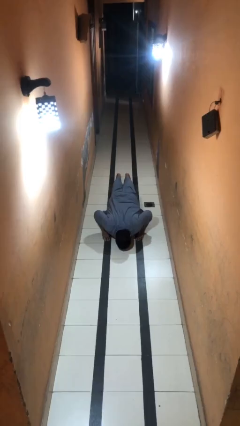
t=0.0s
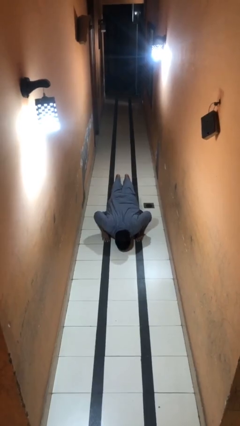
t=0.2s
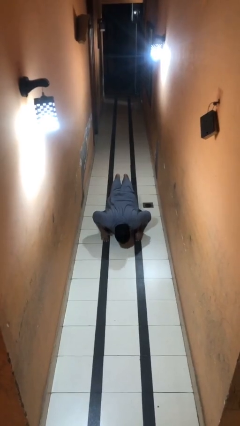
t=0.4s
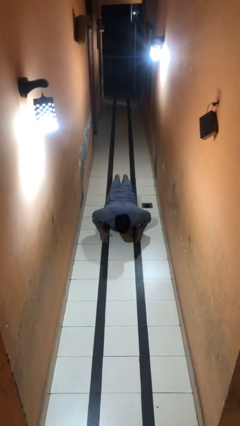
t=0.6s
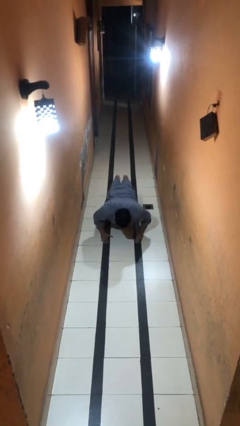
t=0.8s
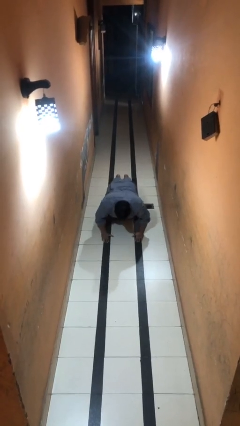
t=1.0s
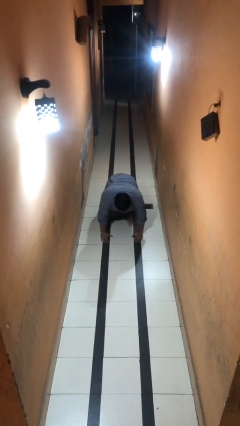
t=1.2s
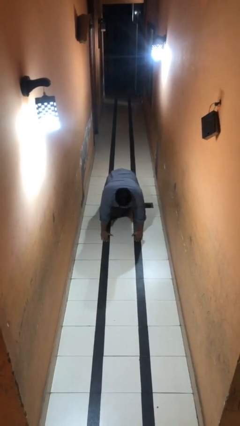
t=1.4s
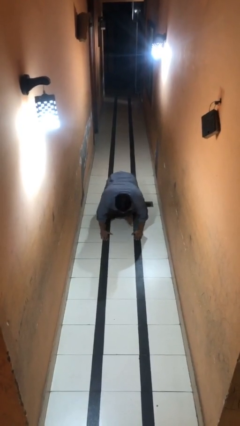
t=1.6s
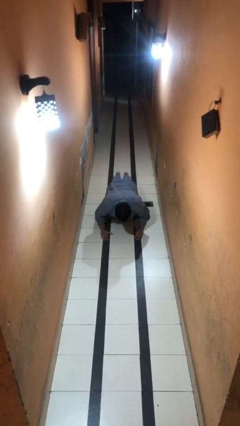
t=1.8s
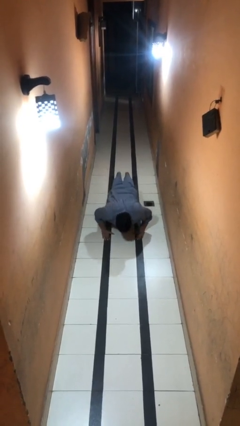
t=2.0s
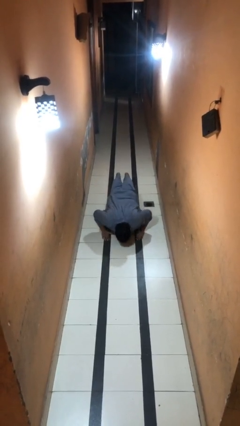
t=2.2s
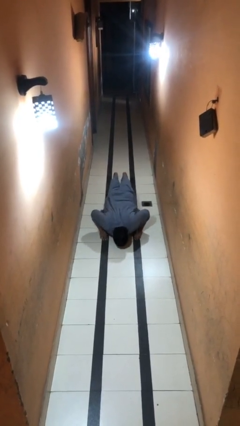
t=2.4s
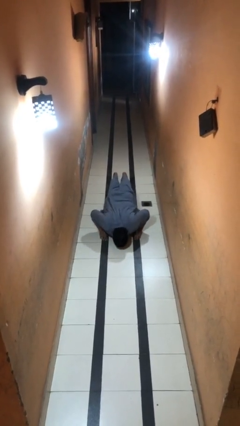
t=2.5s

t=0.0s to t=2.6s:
person exercises with pushup

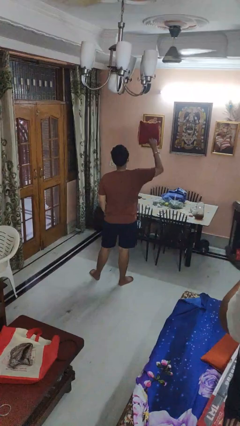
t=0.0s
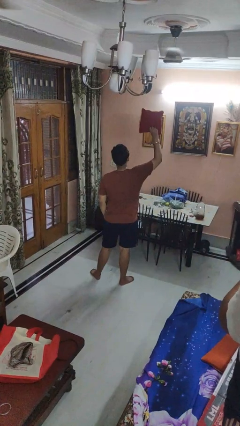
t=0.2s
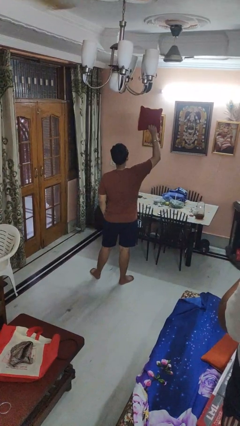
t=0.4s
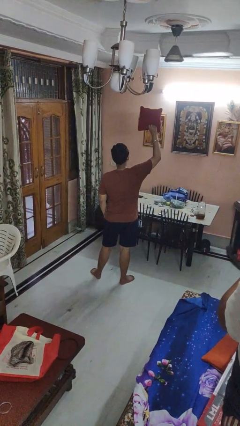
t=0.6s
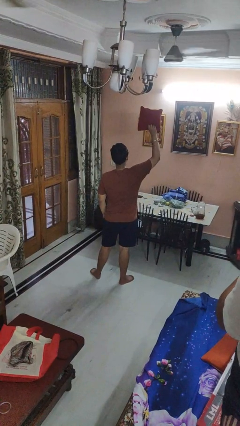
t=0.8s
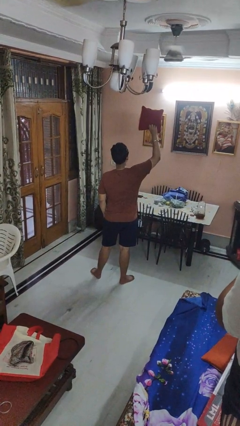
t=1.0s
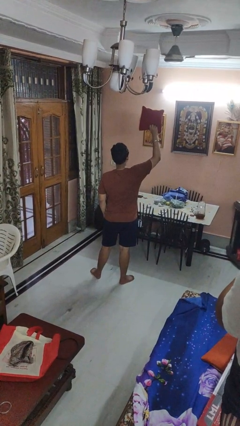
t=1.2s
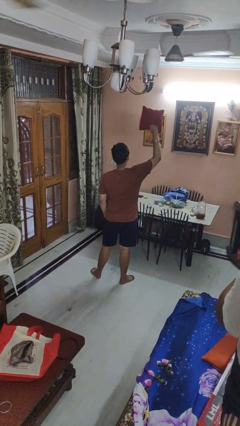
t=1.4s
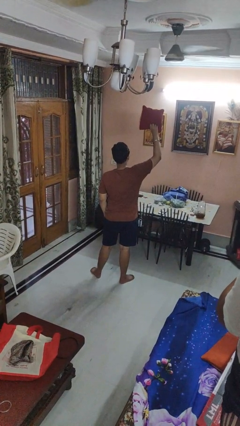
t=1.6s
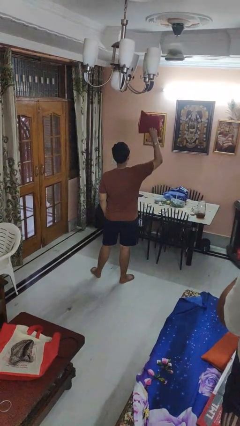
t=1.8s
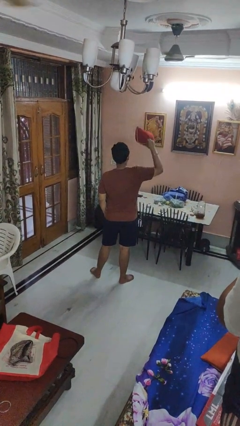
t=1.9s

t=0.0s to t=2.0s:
person holds object above head

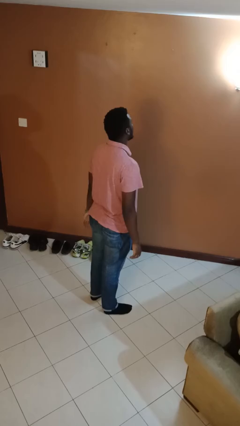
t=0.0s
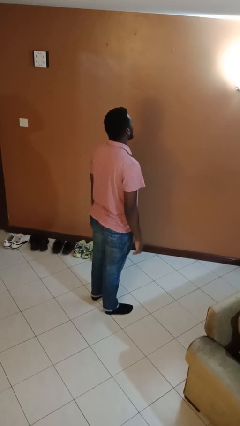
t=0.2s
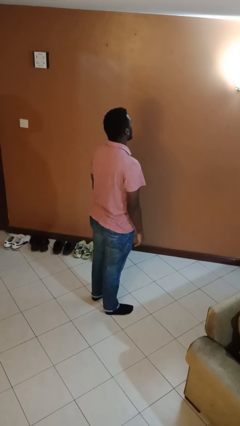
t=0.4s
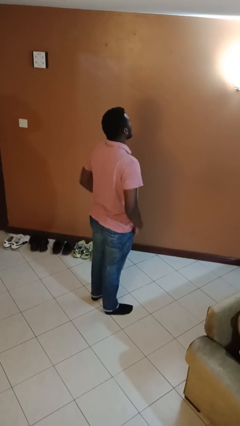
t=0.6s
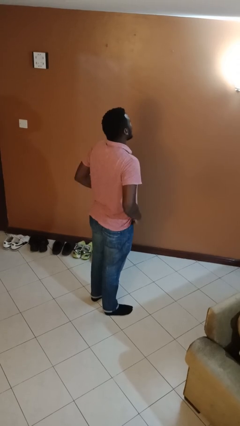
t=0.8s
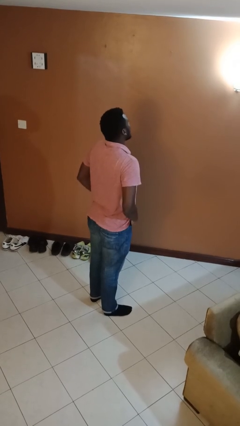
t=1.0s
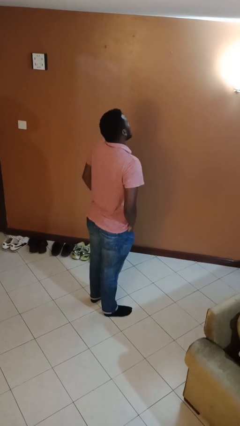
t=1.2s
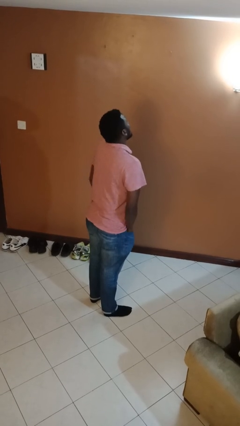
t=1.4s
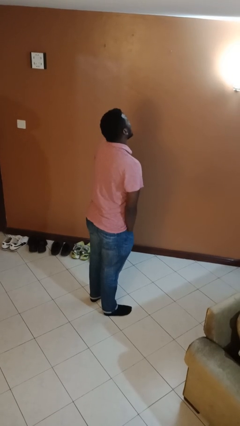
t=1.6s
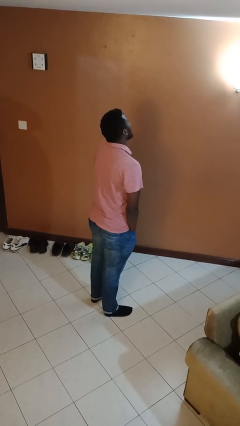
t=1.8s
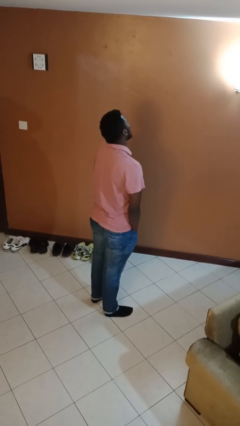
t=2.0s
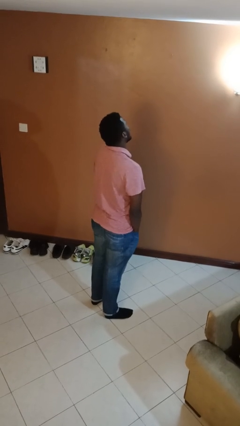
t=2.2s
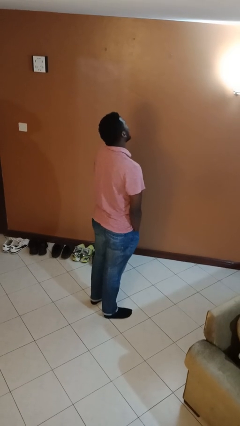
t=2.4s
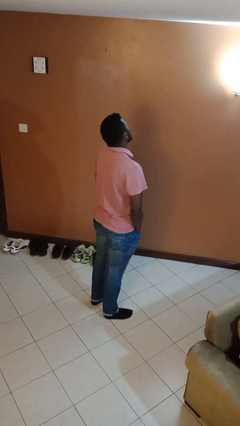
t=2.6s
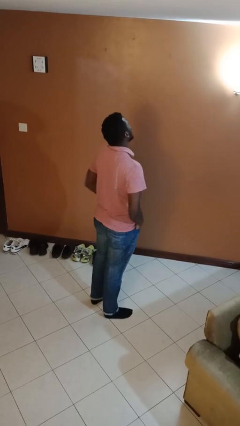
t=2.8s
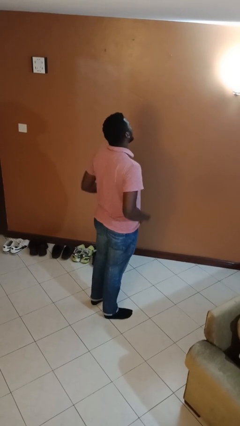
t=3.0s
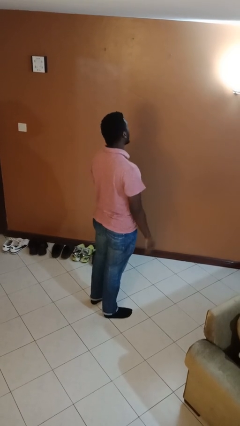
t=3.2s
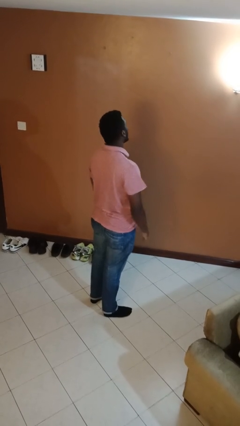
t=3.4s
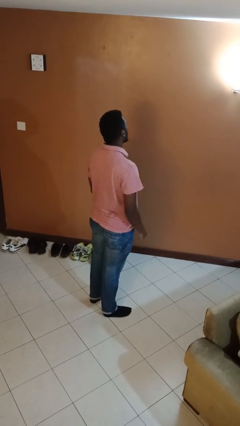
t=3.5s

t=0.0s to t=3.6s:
person puts hands in back pockets

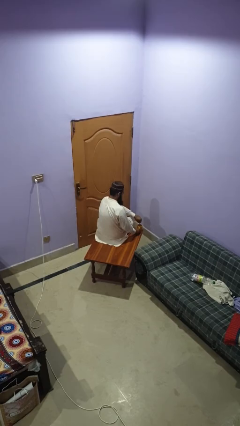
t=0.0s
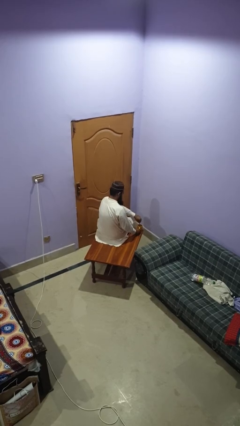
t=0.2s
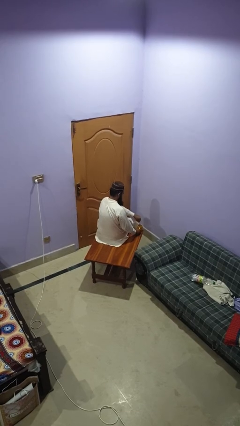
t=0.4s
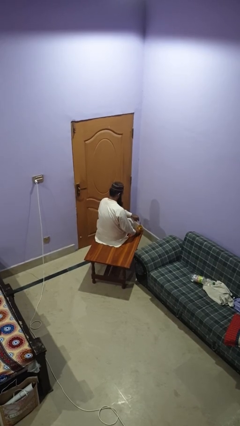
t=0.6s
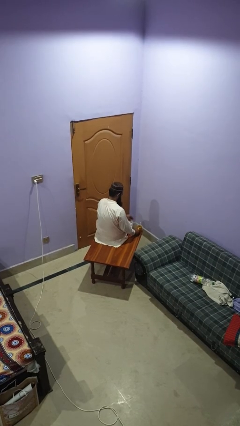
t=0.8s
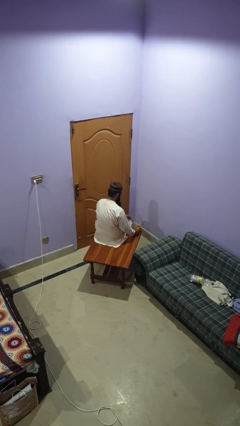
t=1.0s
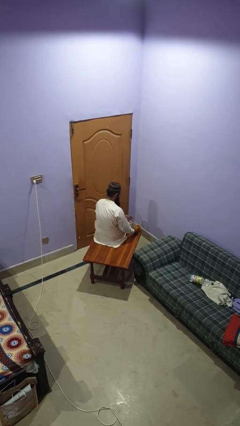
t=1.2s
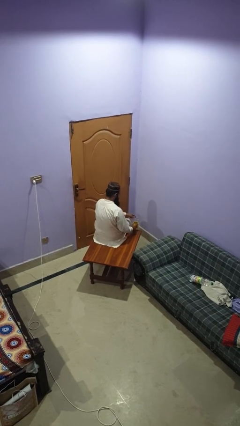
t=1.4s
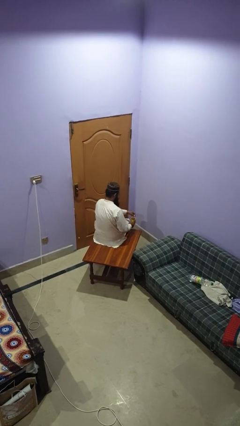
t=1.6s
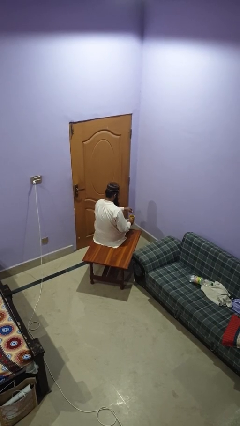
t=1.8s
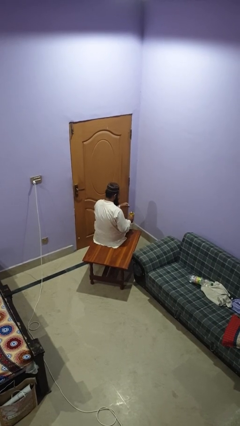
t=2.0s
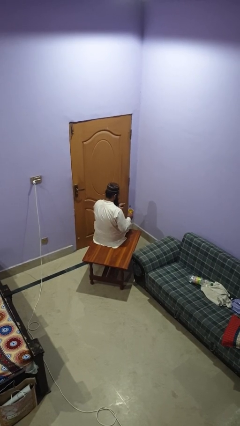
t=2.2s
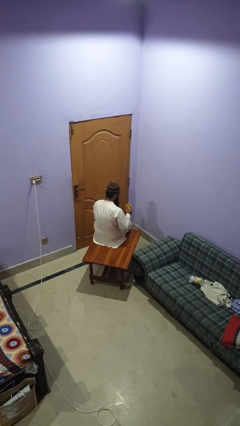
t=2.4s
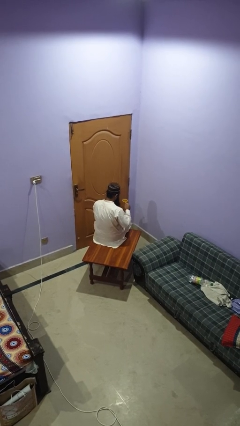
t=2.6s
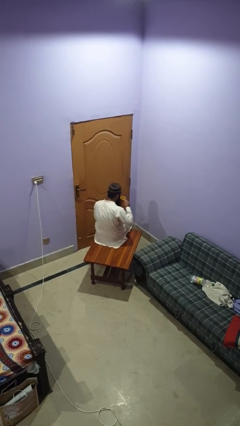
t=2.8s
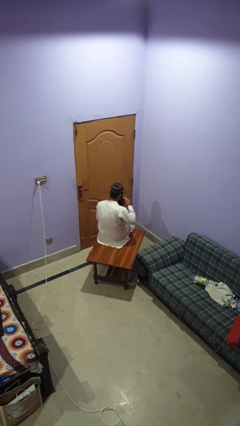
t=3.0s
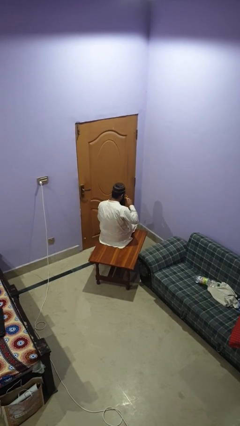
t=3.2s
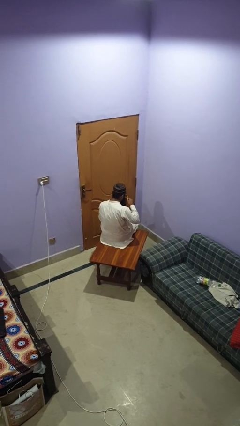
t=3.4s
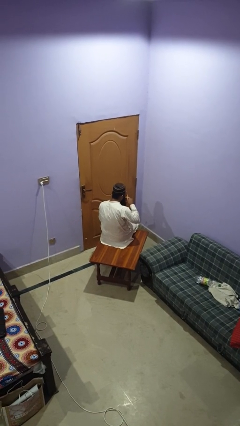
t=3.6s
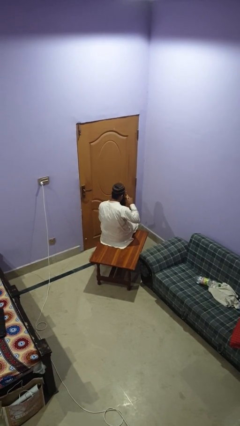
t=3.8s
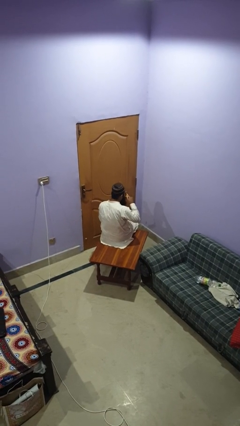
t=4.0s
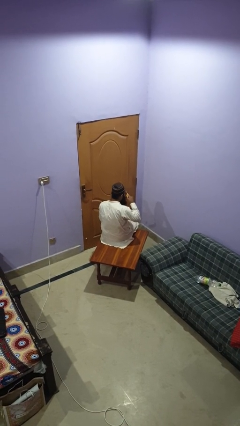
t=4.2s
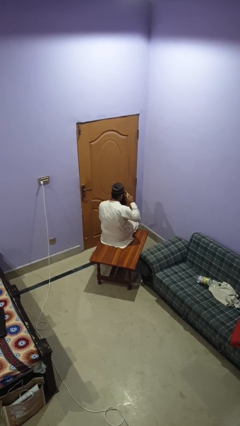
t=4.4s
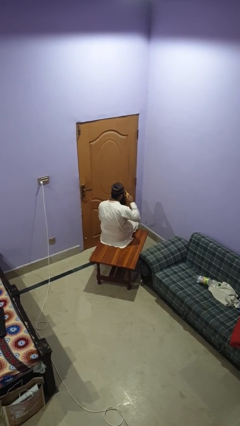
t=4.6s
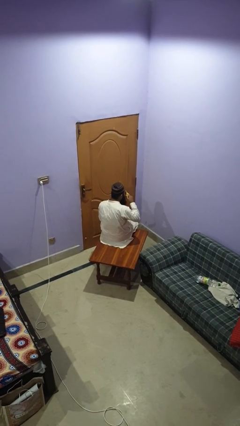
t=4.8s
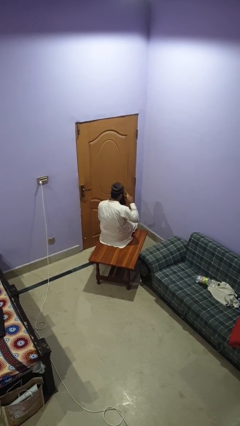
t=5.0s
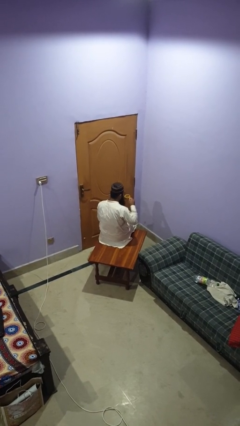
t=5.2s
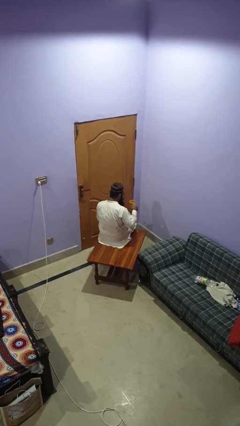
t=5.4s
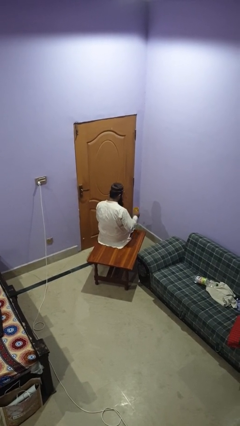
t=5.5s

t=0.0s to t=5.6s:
person drinks from mug

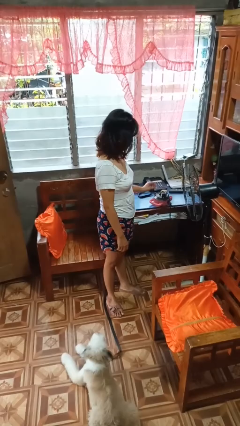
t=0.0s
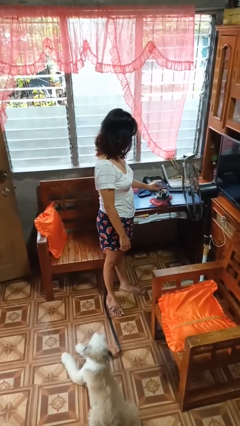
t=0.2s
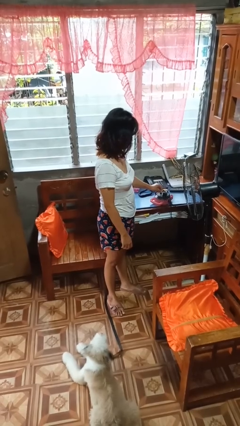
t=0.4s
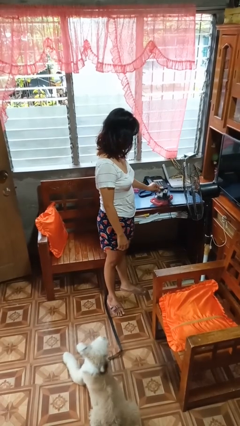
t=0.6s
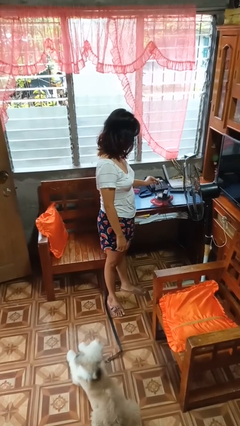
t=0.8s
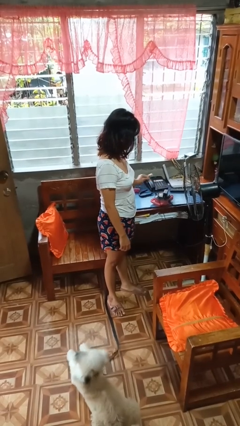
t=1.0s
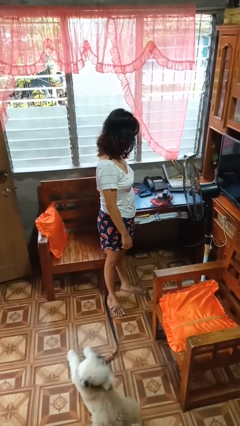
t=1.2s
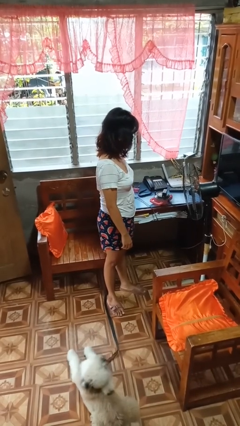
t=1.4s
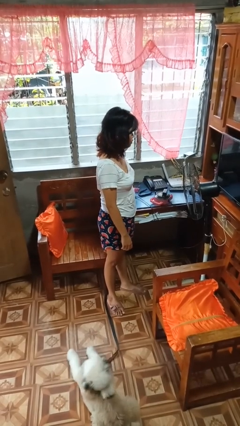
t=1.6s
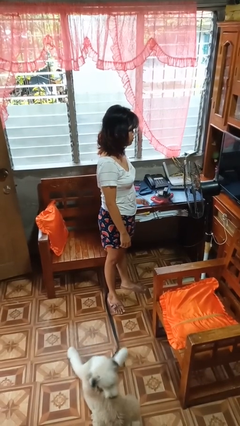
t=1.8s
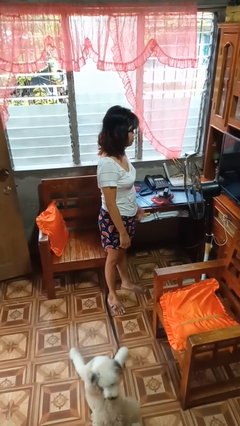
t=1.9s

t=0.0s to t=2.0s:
person unplugs from electrical socket

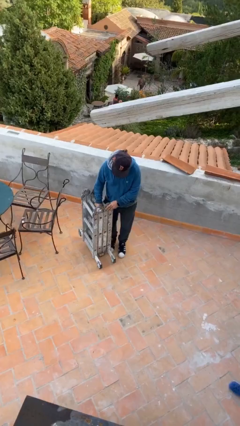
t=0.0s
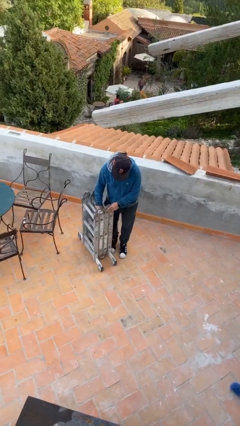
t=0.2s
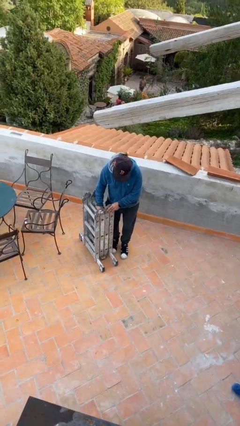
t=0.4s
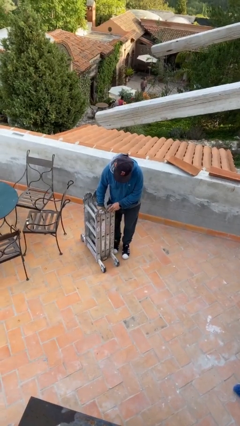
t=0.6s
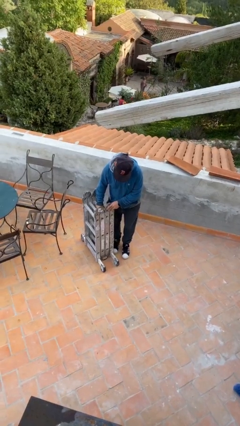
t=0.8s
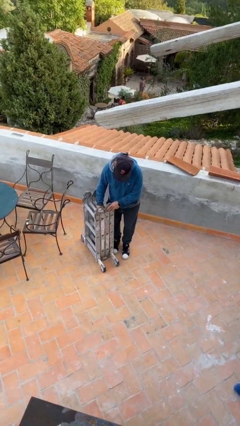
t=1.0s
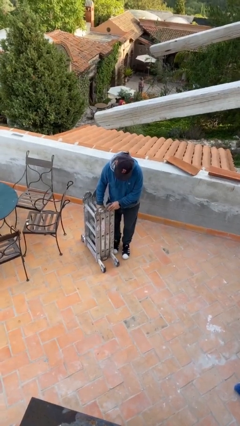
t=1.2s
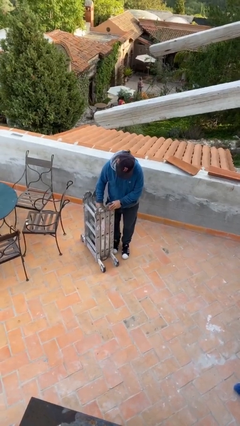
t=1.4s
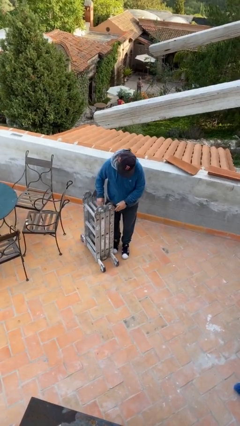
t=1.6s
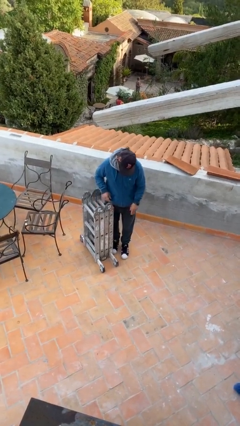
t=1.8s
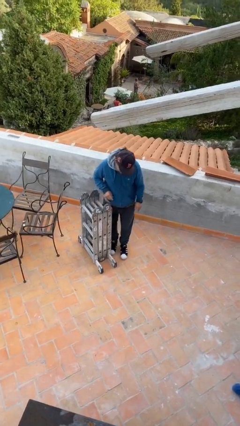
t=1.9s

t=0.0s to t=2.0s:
person puts down object on floor
